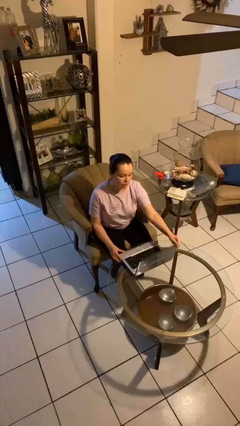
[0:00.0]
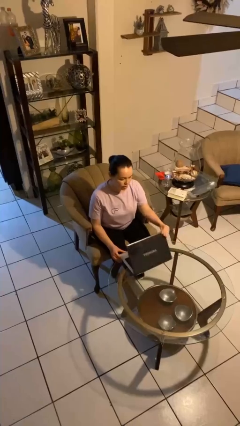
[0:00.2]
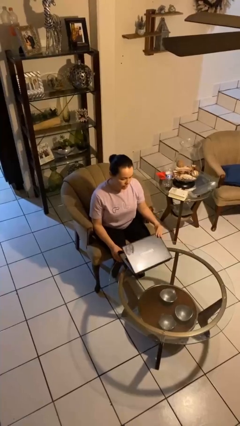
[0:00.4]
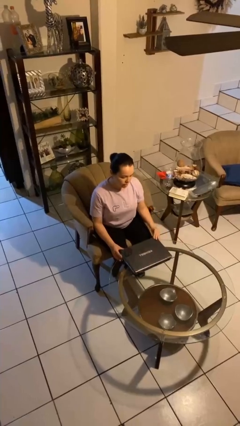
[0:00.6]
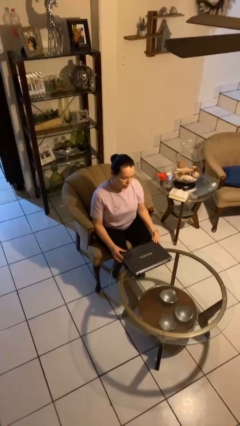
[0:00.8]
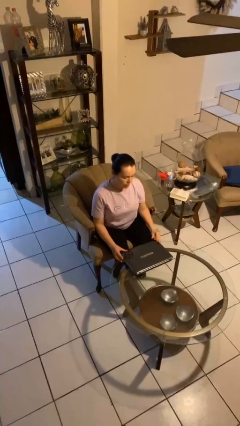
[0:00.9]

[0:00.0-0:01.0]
person closes laptop

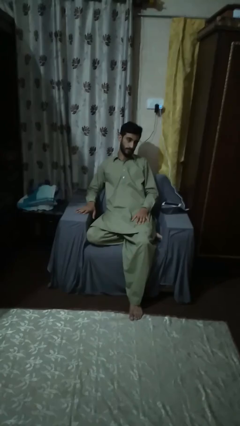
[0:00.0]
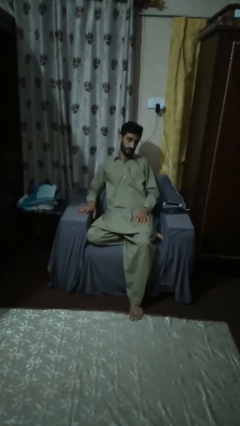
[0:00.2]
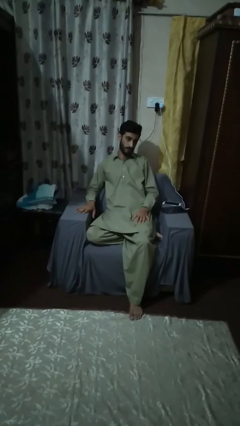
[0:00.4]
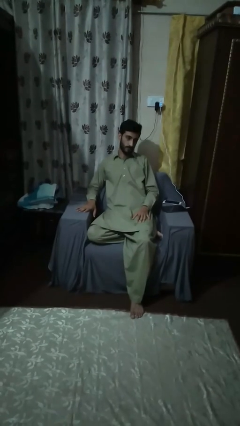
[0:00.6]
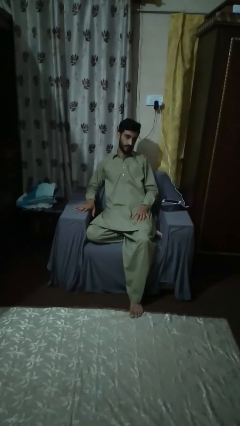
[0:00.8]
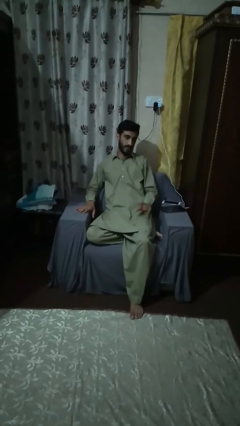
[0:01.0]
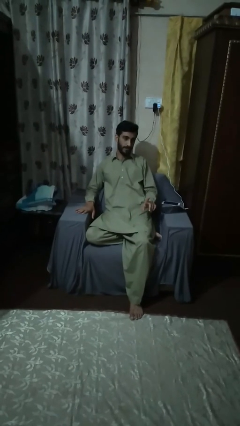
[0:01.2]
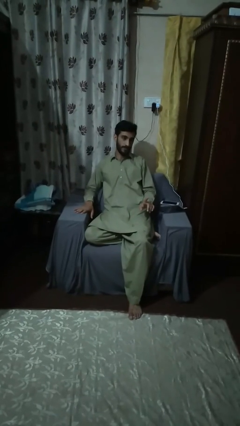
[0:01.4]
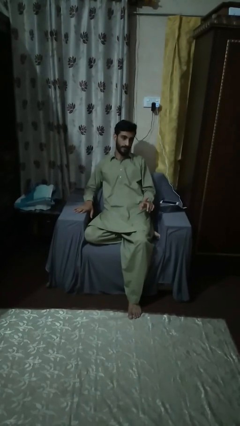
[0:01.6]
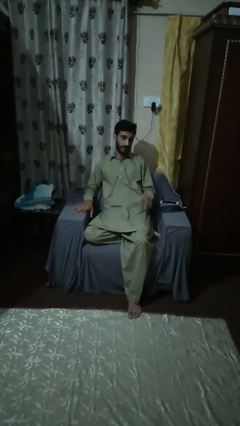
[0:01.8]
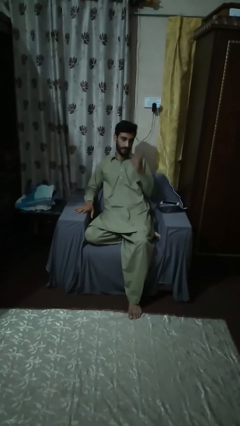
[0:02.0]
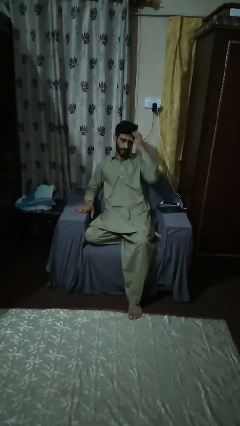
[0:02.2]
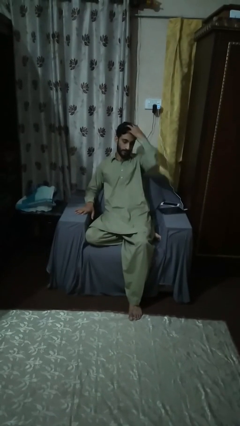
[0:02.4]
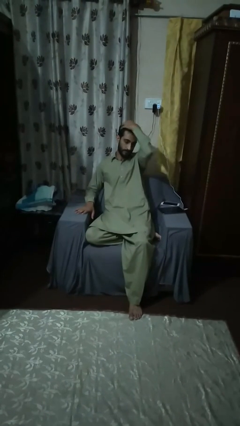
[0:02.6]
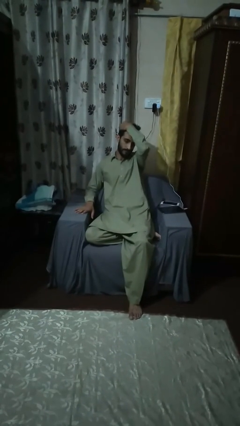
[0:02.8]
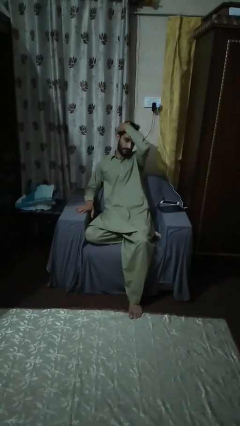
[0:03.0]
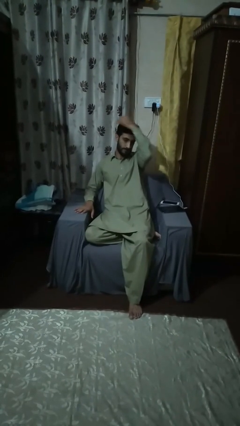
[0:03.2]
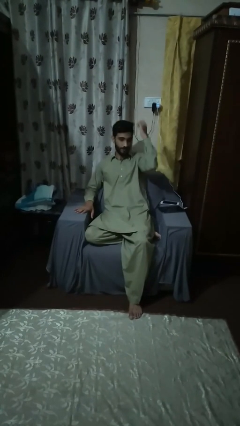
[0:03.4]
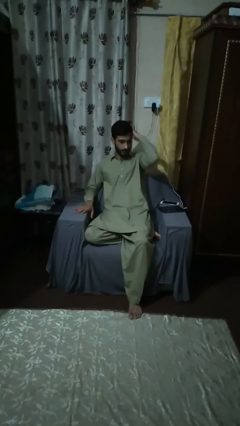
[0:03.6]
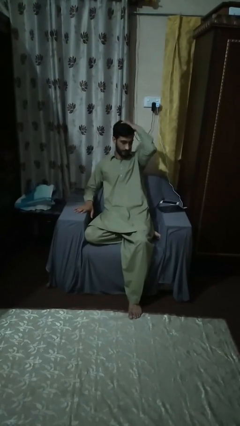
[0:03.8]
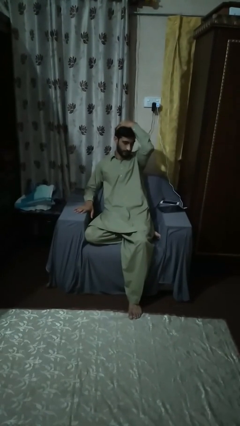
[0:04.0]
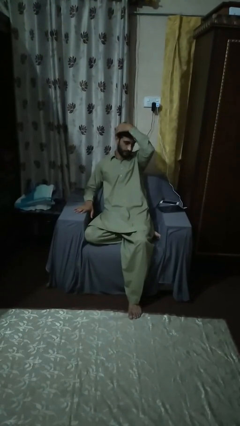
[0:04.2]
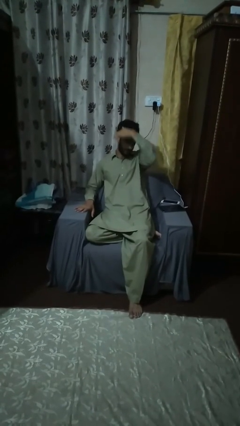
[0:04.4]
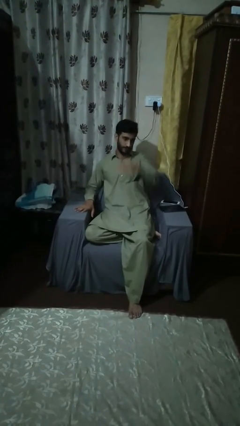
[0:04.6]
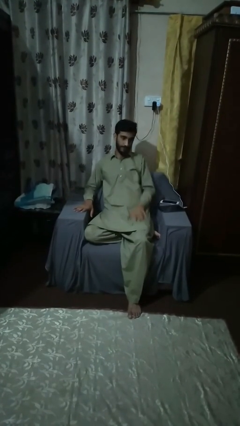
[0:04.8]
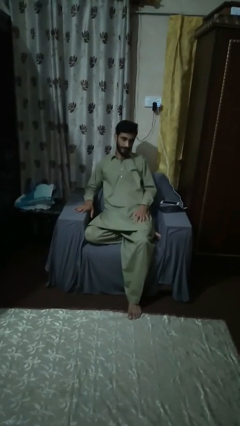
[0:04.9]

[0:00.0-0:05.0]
person strokes hair

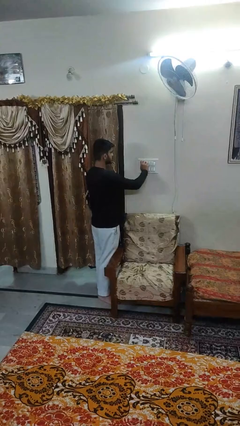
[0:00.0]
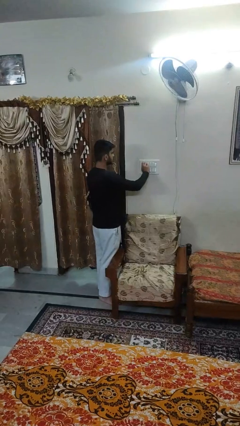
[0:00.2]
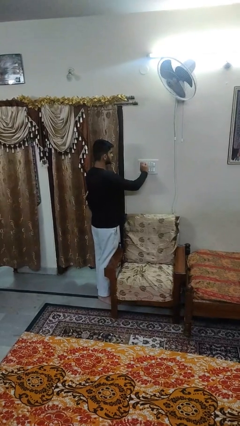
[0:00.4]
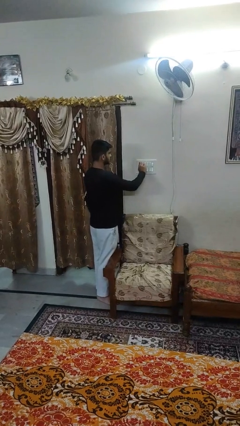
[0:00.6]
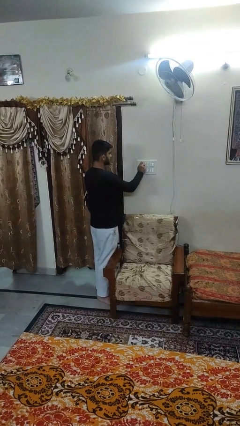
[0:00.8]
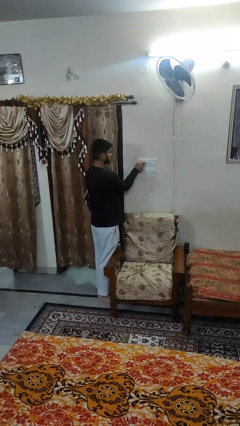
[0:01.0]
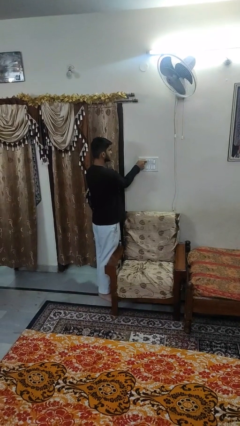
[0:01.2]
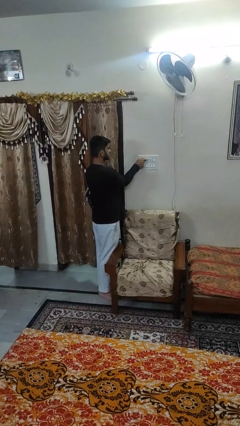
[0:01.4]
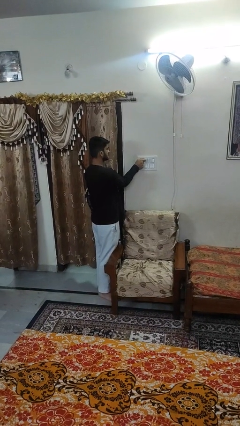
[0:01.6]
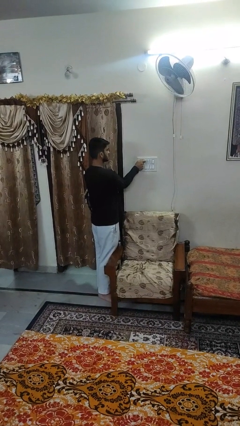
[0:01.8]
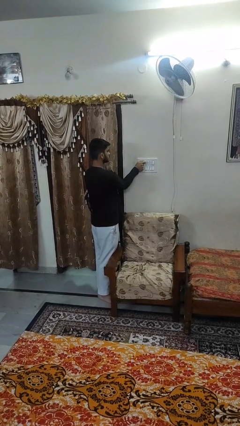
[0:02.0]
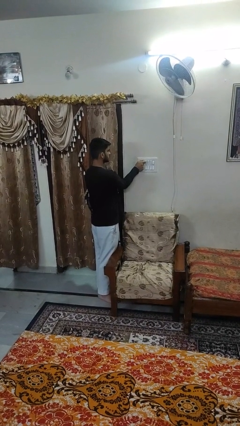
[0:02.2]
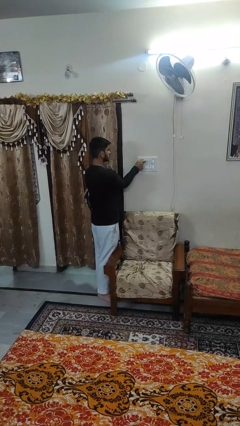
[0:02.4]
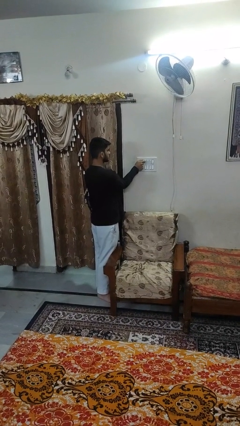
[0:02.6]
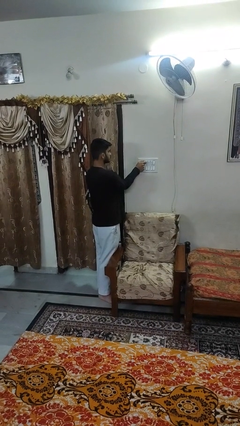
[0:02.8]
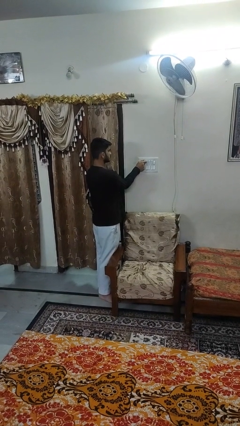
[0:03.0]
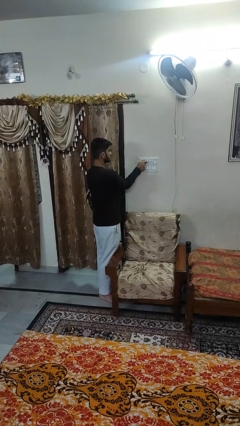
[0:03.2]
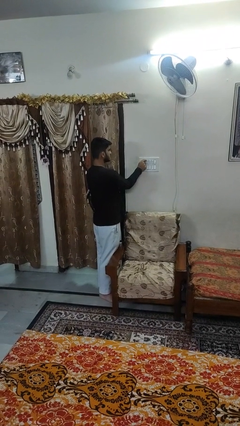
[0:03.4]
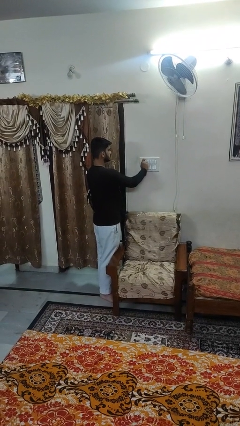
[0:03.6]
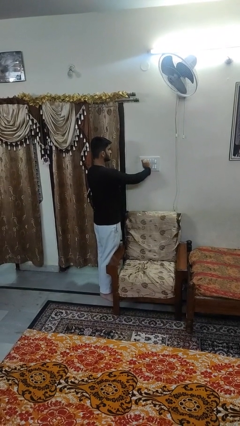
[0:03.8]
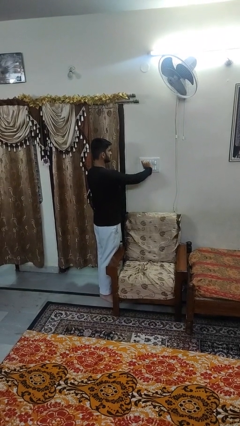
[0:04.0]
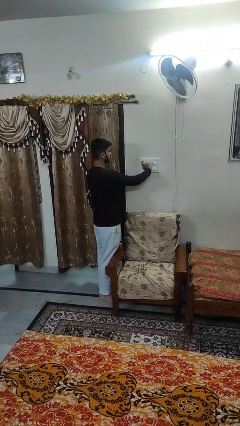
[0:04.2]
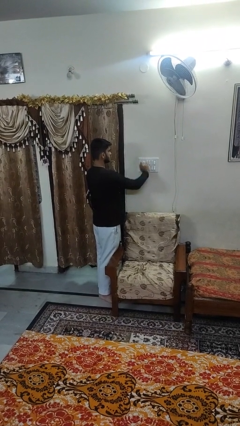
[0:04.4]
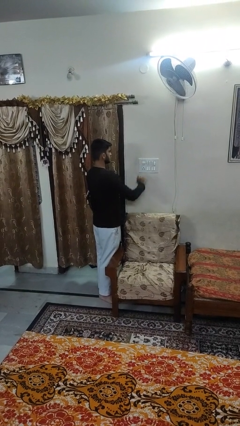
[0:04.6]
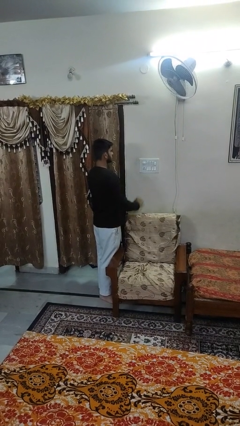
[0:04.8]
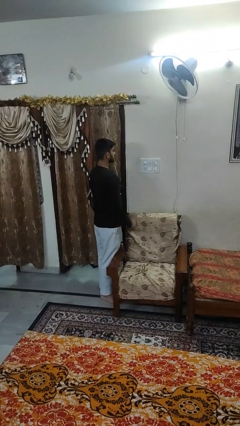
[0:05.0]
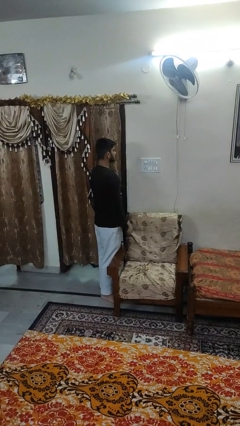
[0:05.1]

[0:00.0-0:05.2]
person adjusts thermostat

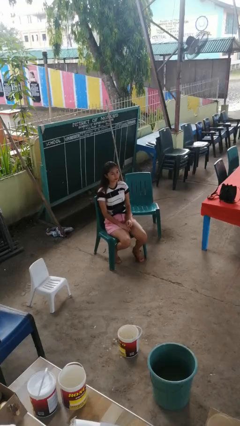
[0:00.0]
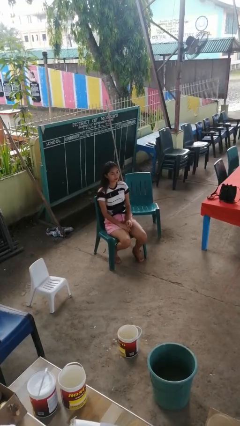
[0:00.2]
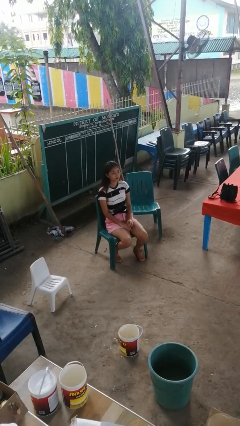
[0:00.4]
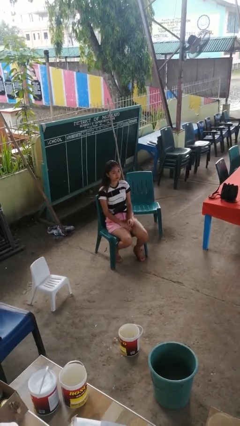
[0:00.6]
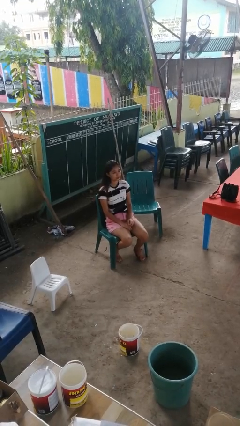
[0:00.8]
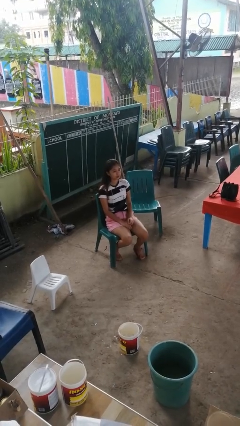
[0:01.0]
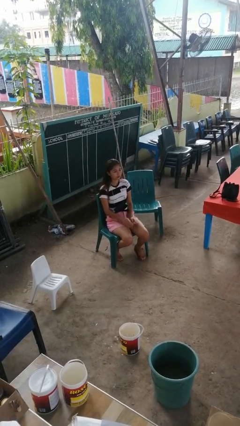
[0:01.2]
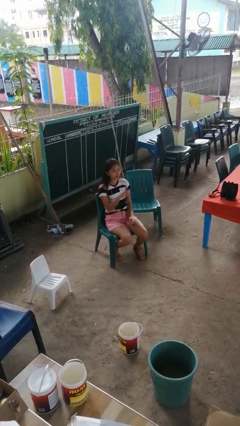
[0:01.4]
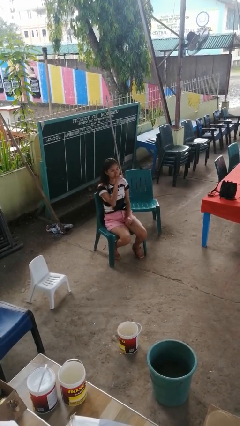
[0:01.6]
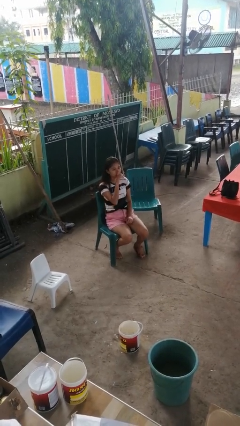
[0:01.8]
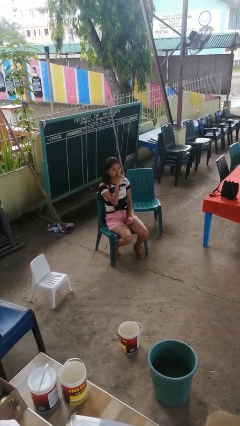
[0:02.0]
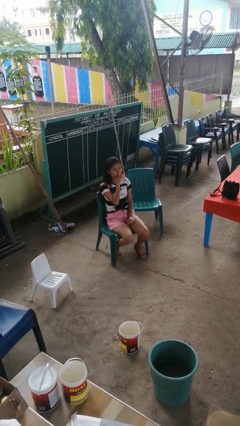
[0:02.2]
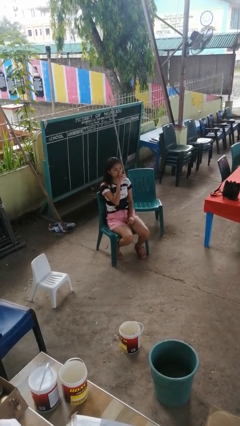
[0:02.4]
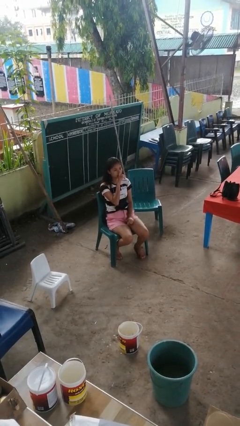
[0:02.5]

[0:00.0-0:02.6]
person gestures be quiet

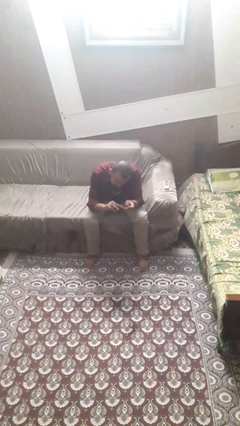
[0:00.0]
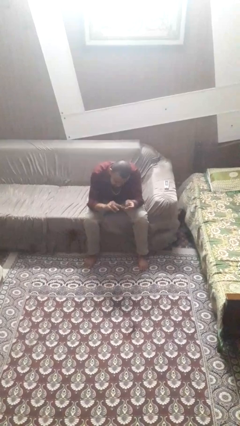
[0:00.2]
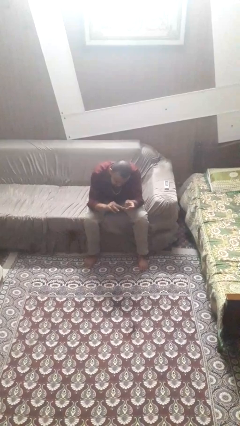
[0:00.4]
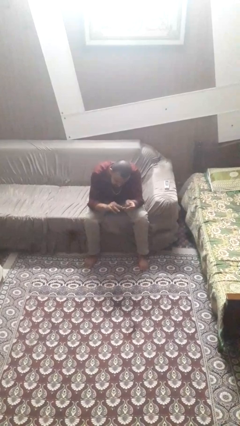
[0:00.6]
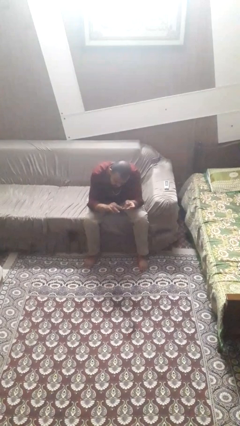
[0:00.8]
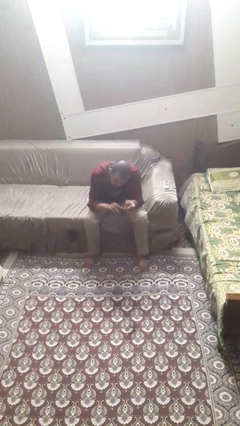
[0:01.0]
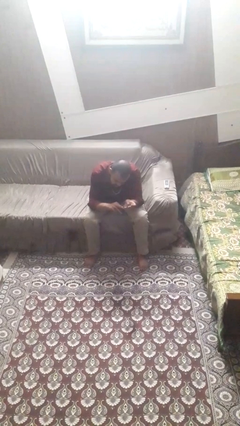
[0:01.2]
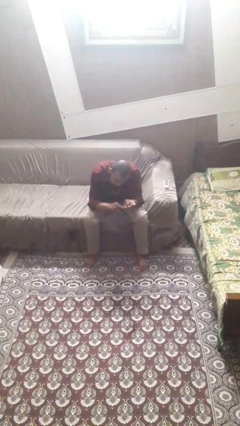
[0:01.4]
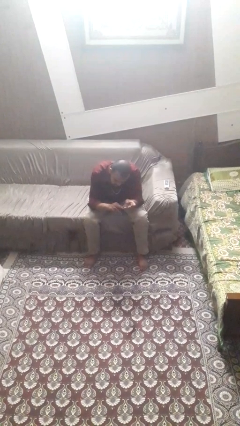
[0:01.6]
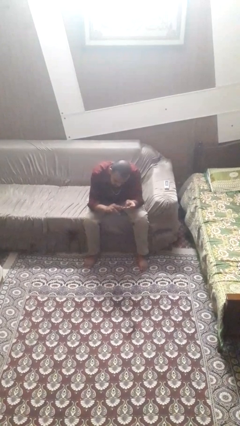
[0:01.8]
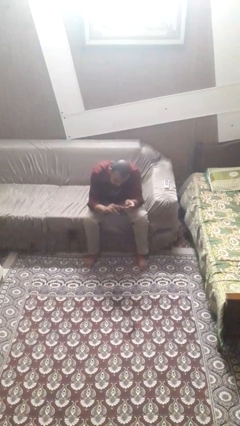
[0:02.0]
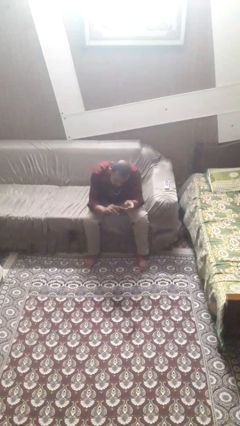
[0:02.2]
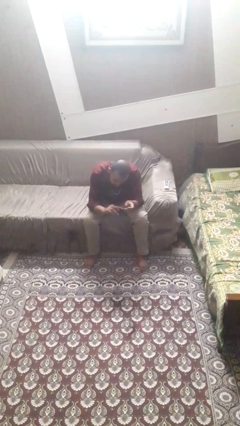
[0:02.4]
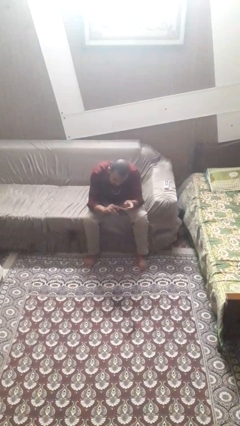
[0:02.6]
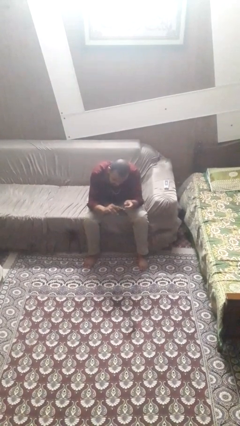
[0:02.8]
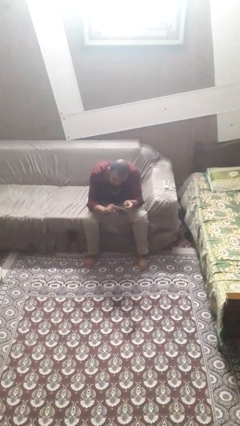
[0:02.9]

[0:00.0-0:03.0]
person clips fingernails

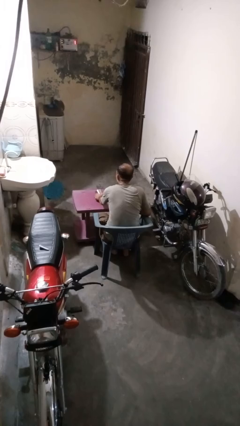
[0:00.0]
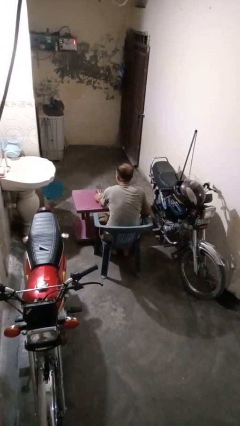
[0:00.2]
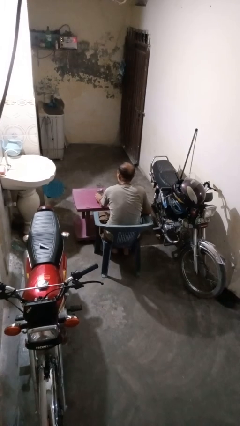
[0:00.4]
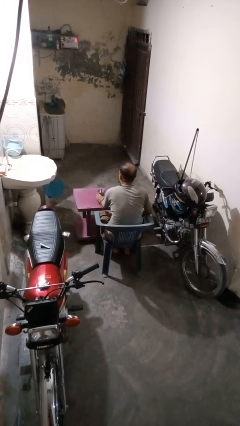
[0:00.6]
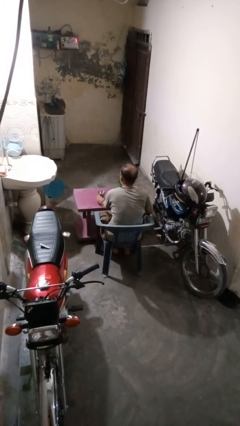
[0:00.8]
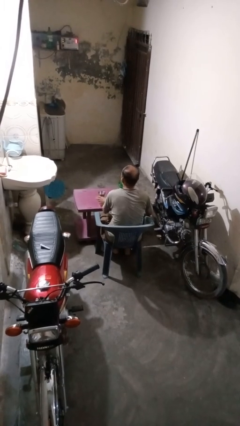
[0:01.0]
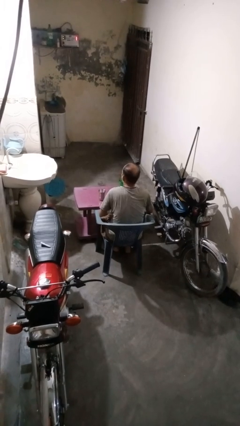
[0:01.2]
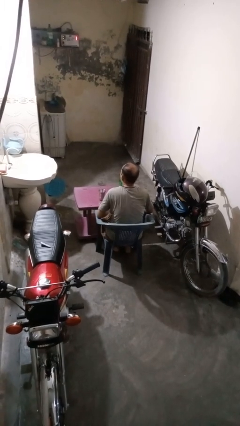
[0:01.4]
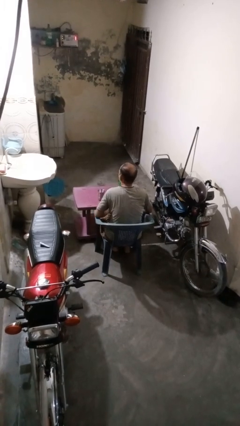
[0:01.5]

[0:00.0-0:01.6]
person sets upright glass
